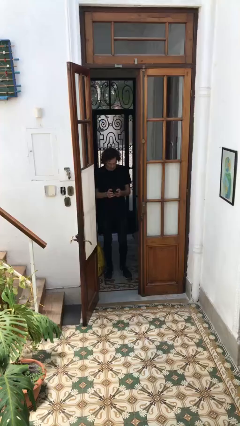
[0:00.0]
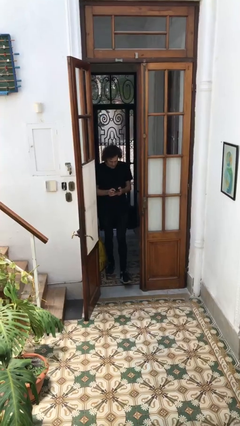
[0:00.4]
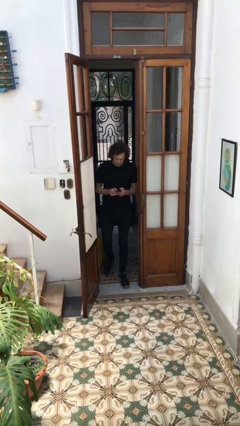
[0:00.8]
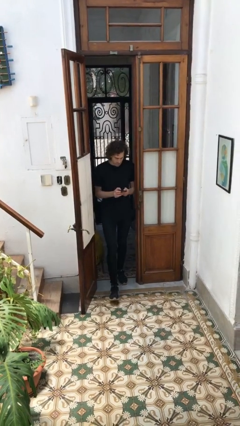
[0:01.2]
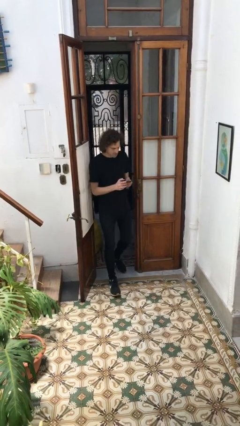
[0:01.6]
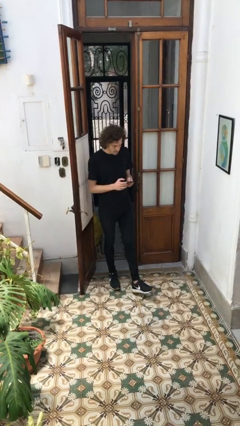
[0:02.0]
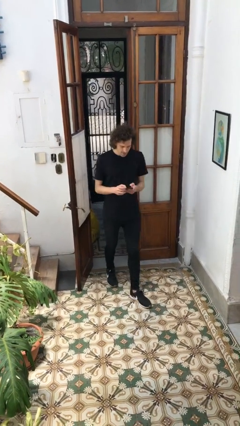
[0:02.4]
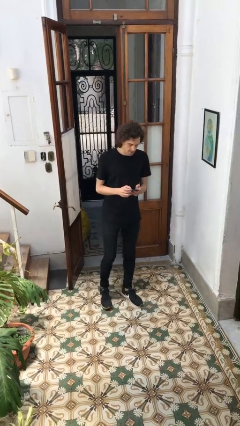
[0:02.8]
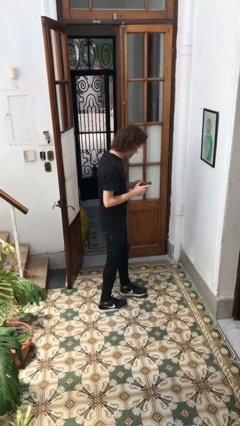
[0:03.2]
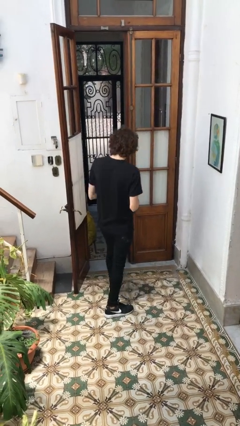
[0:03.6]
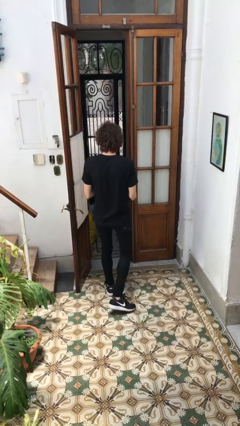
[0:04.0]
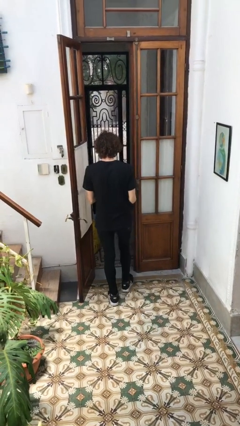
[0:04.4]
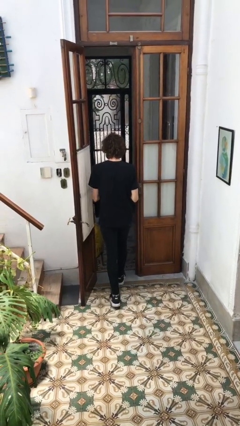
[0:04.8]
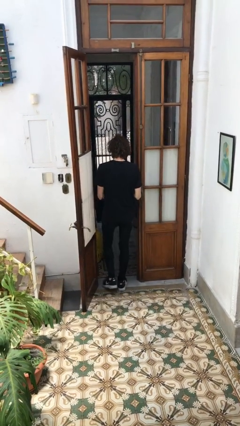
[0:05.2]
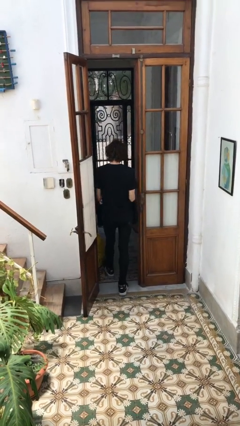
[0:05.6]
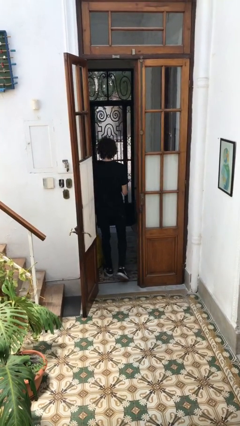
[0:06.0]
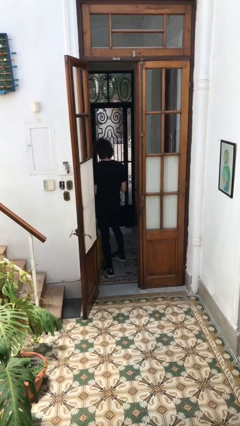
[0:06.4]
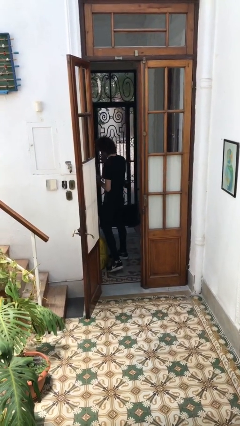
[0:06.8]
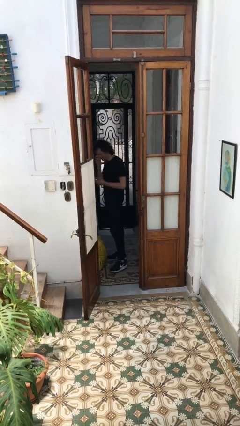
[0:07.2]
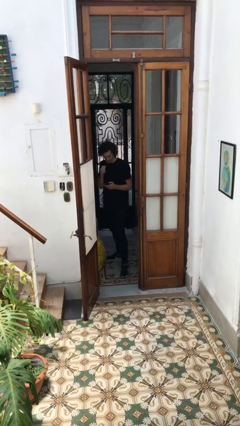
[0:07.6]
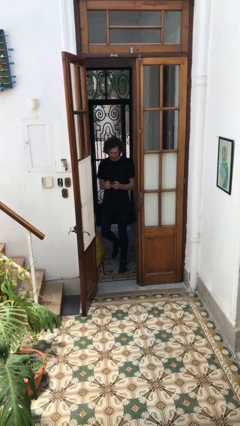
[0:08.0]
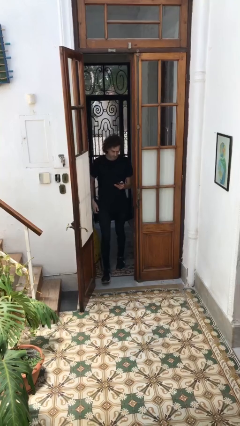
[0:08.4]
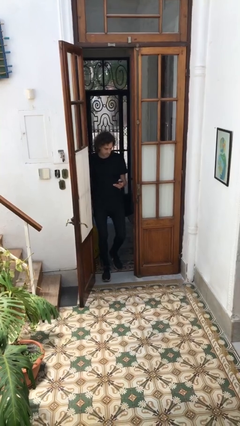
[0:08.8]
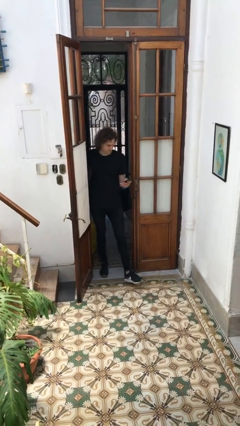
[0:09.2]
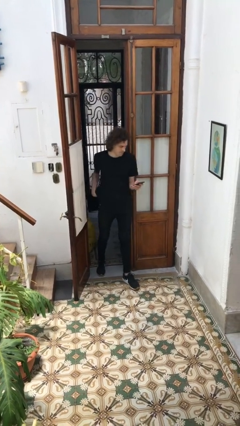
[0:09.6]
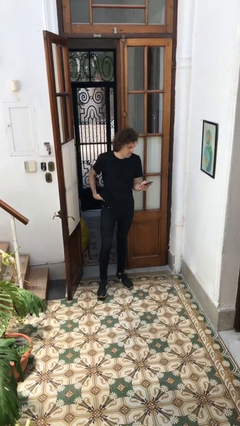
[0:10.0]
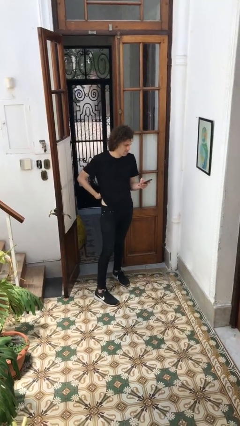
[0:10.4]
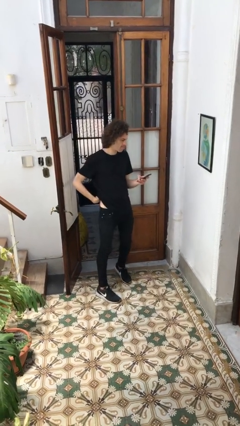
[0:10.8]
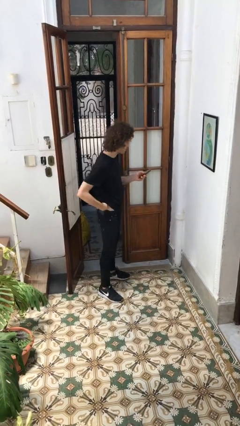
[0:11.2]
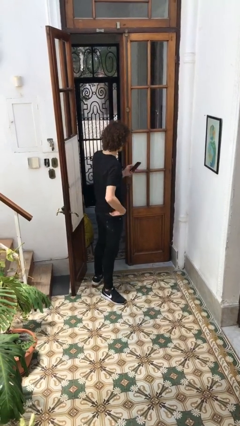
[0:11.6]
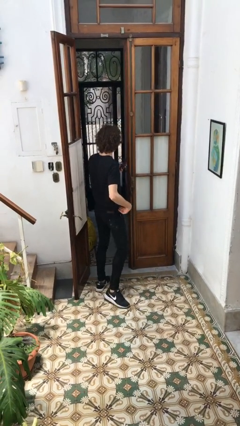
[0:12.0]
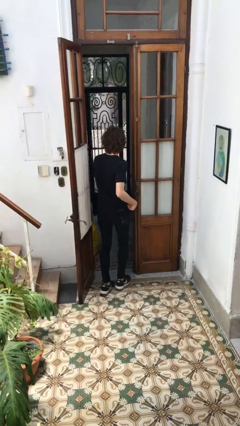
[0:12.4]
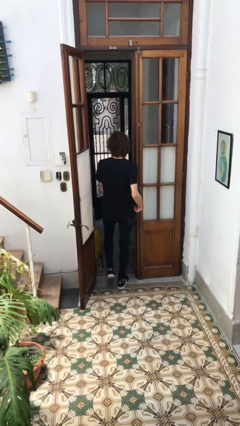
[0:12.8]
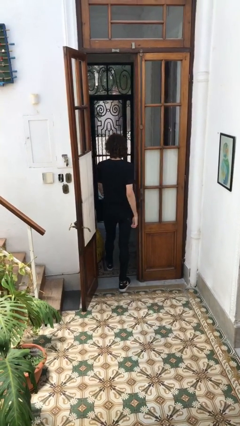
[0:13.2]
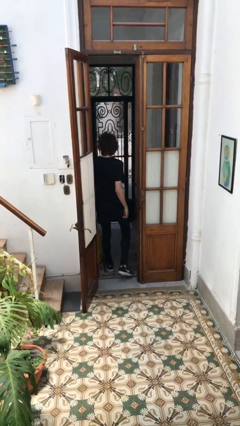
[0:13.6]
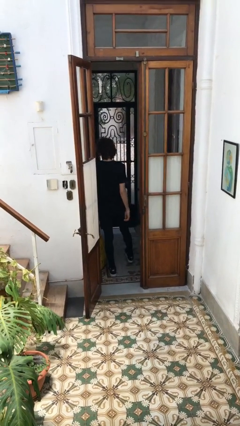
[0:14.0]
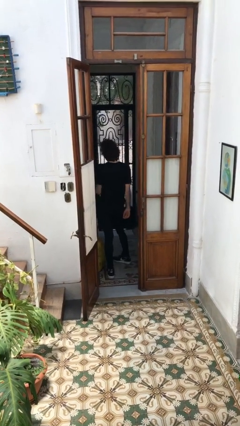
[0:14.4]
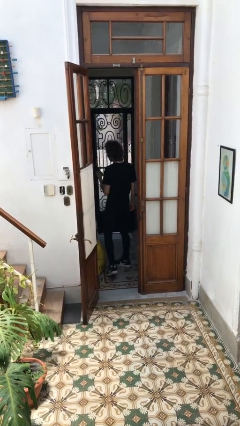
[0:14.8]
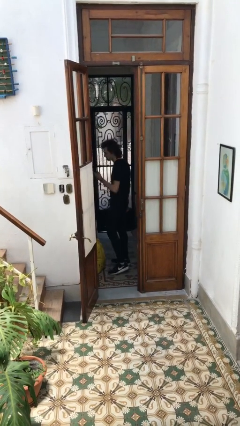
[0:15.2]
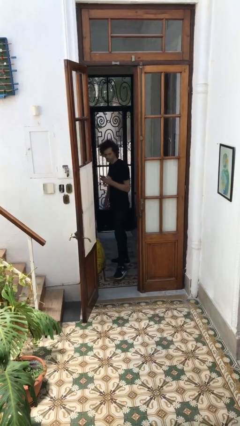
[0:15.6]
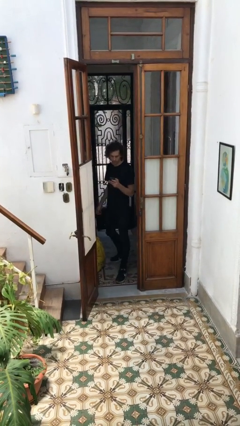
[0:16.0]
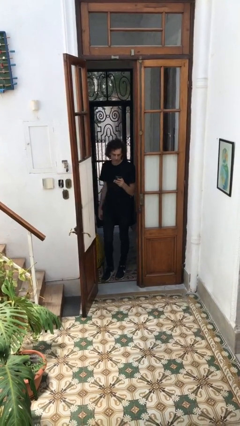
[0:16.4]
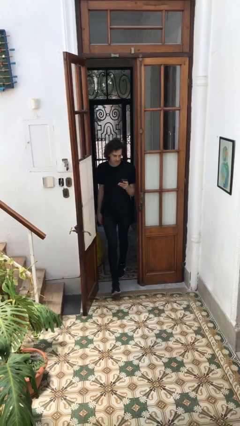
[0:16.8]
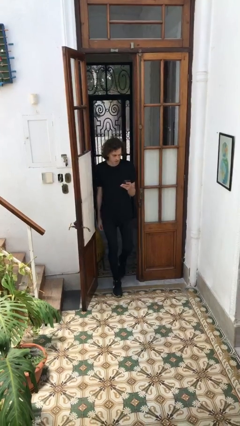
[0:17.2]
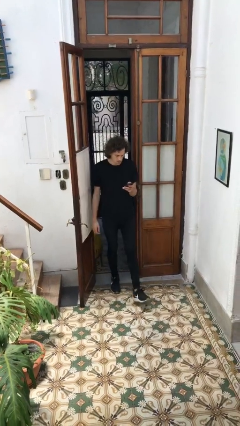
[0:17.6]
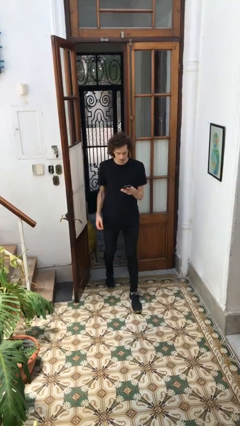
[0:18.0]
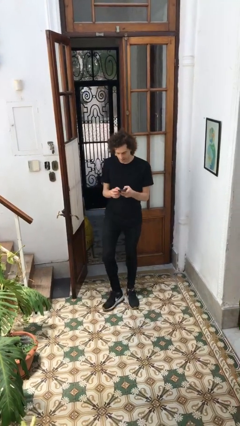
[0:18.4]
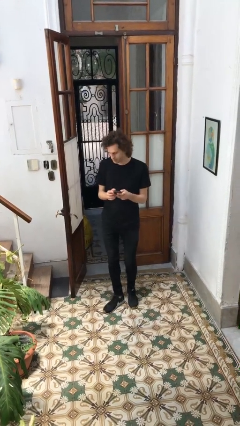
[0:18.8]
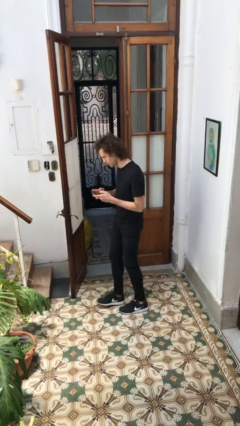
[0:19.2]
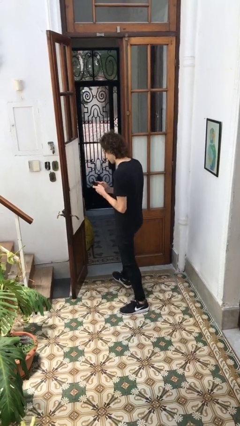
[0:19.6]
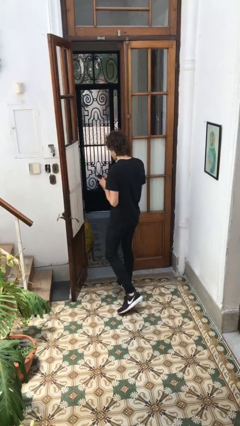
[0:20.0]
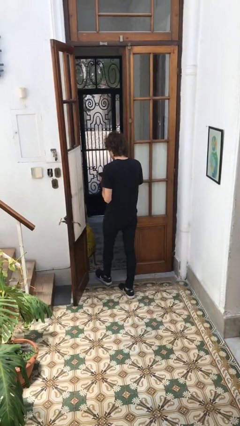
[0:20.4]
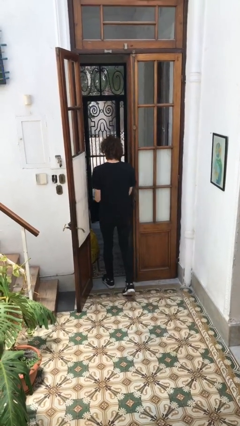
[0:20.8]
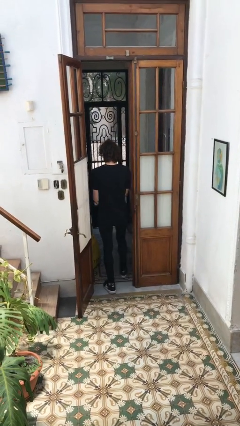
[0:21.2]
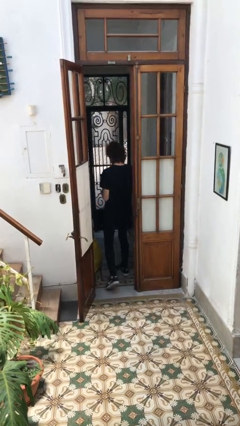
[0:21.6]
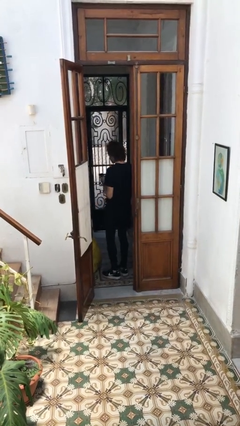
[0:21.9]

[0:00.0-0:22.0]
person texts on phone

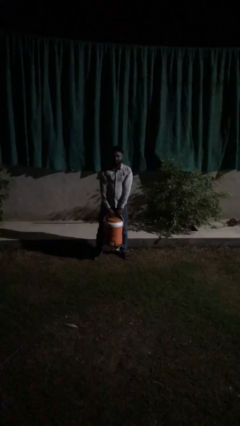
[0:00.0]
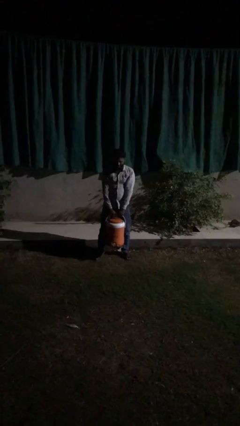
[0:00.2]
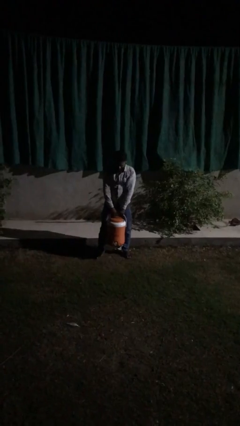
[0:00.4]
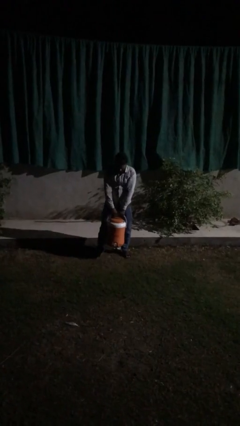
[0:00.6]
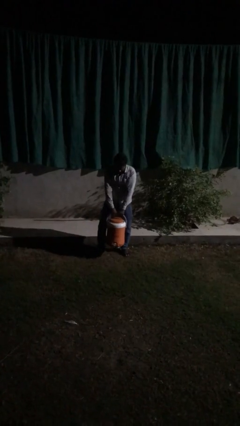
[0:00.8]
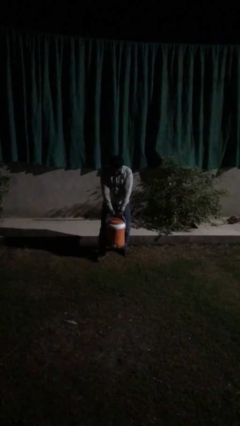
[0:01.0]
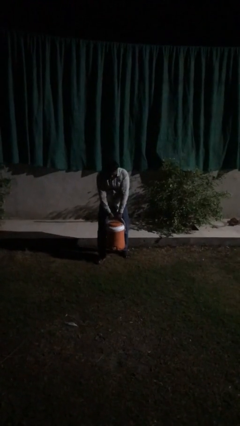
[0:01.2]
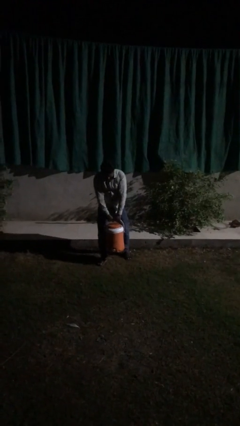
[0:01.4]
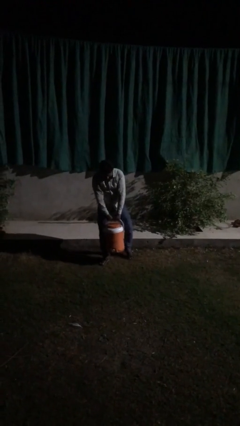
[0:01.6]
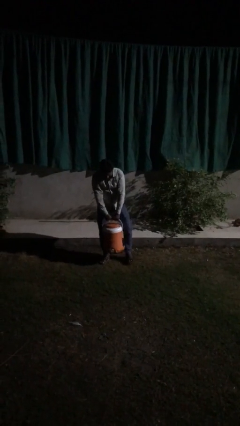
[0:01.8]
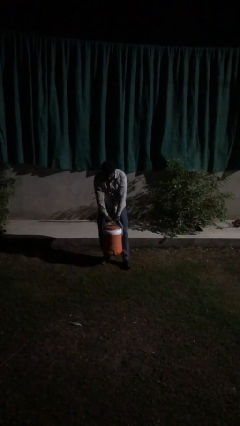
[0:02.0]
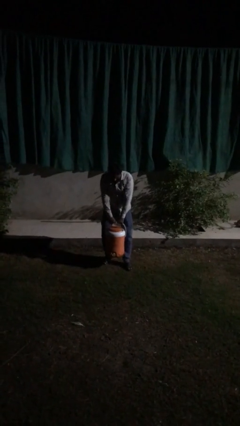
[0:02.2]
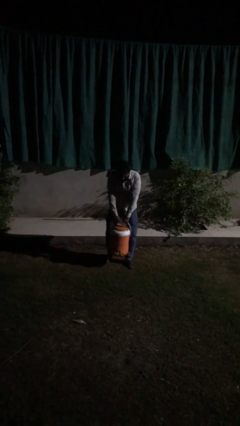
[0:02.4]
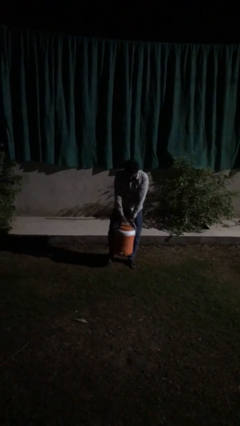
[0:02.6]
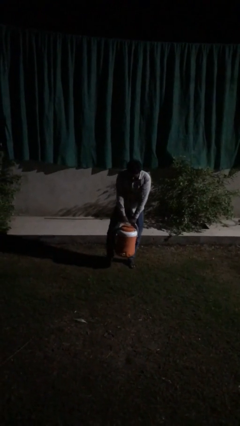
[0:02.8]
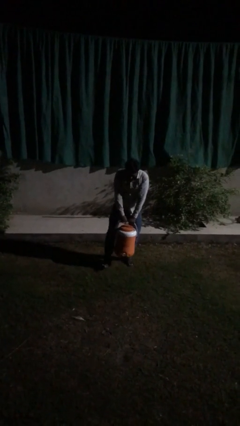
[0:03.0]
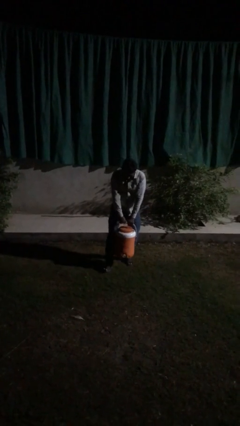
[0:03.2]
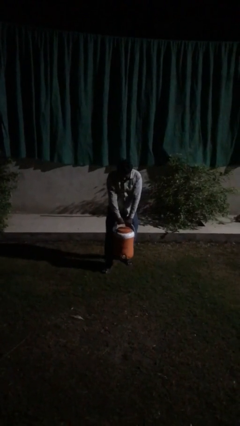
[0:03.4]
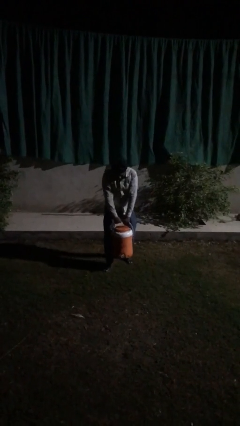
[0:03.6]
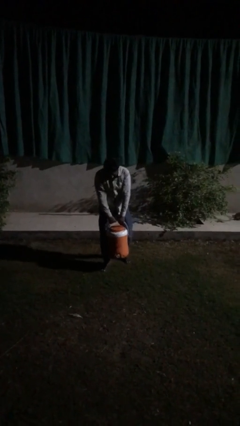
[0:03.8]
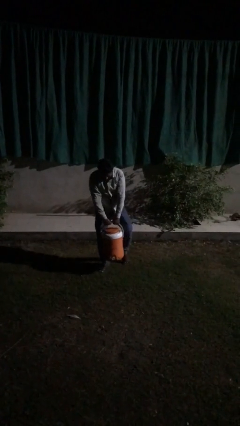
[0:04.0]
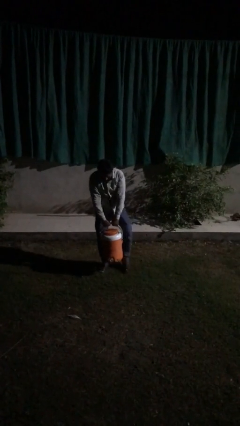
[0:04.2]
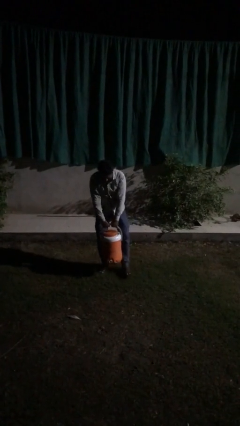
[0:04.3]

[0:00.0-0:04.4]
person carries heavy object

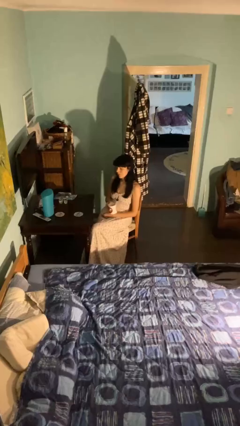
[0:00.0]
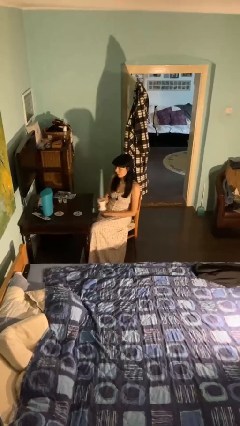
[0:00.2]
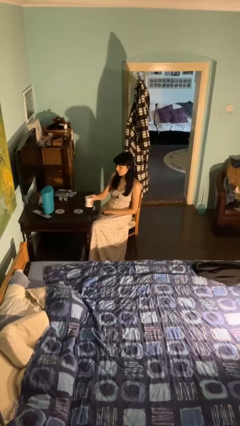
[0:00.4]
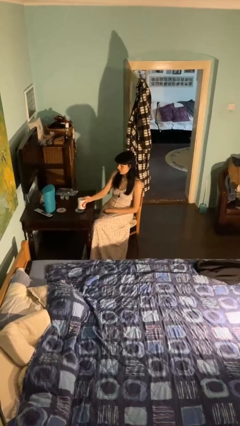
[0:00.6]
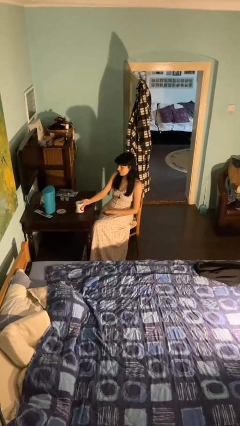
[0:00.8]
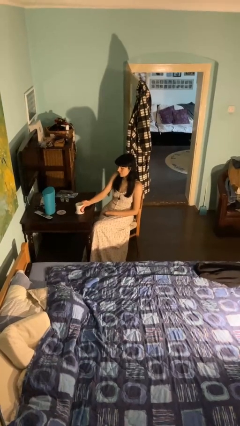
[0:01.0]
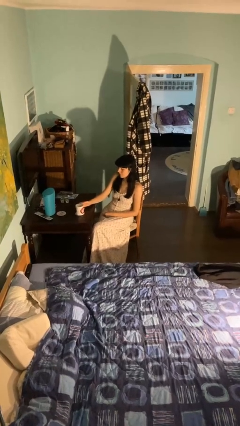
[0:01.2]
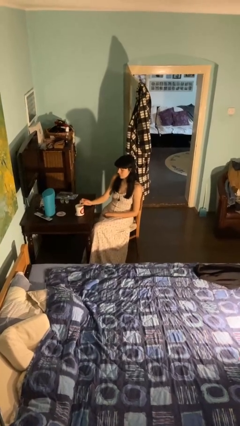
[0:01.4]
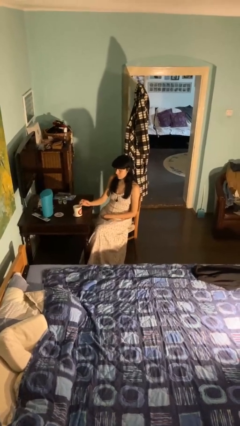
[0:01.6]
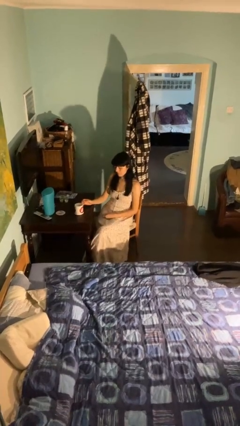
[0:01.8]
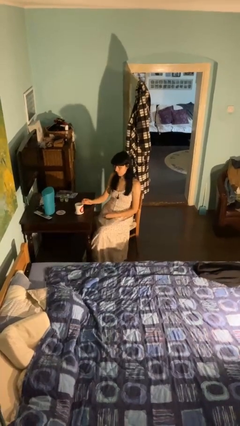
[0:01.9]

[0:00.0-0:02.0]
person puts down object on table

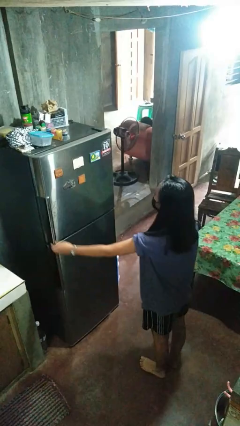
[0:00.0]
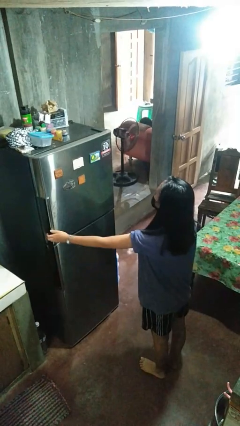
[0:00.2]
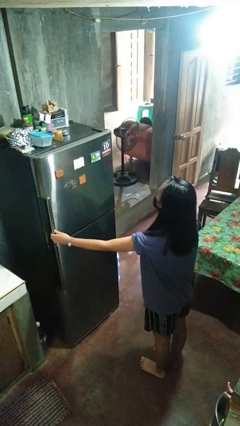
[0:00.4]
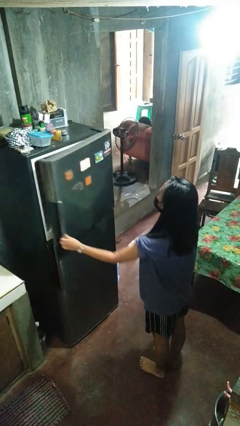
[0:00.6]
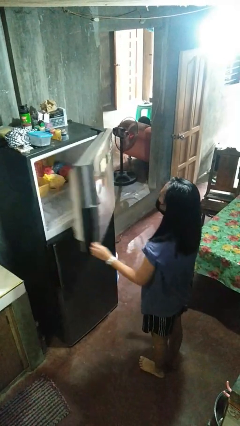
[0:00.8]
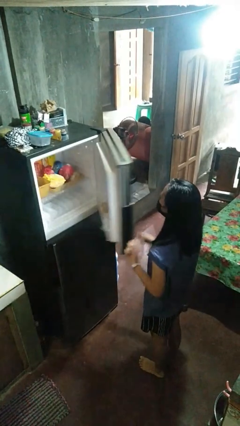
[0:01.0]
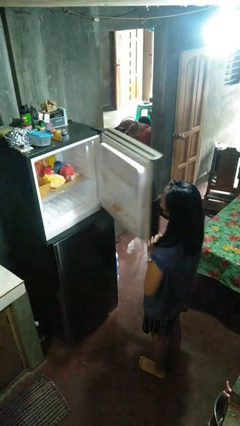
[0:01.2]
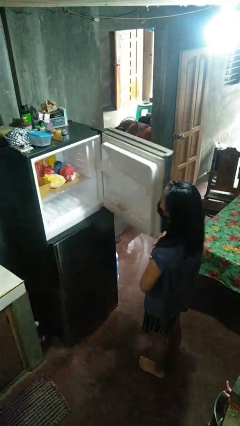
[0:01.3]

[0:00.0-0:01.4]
person opens refrigerator
